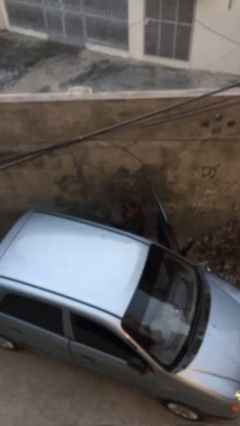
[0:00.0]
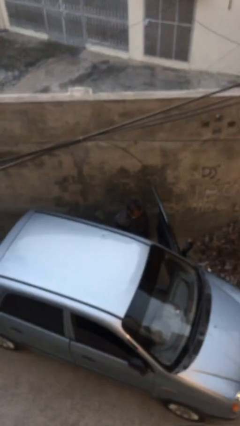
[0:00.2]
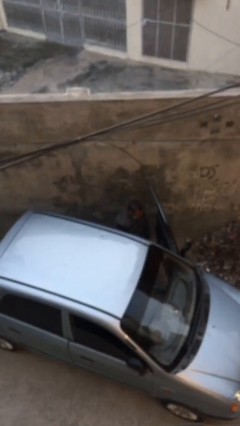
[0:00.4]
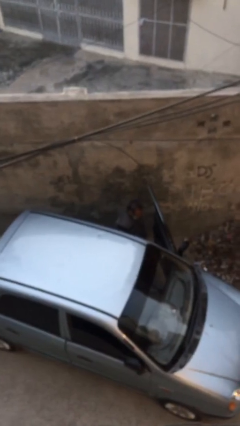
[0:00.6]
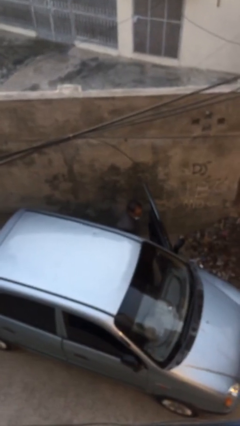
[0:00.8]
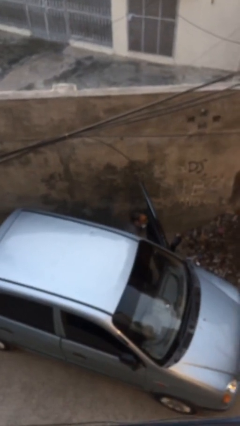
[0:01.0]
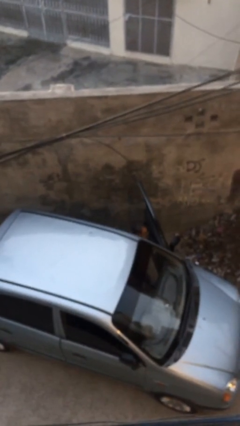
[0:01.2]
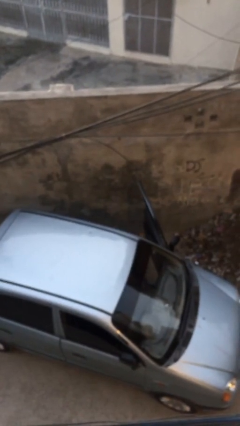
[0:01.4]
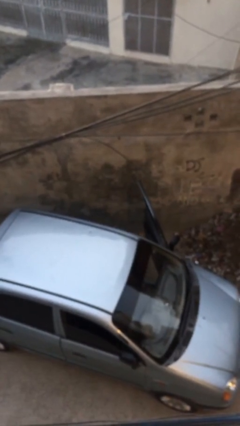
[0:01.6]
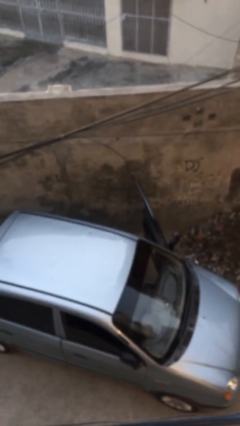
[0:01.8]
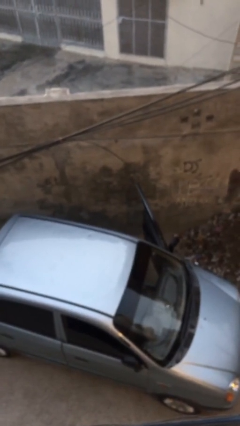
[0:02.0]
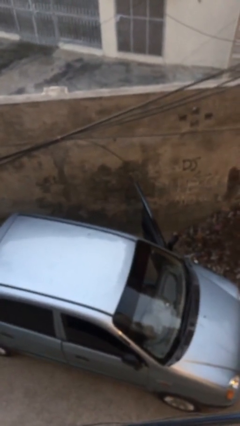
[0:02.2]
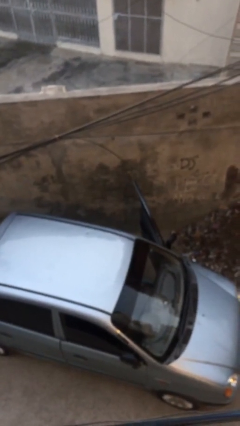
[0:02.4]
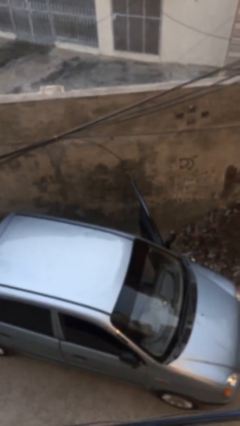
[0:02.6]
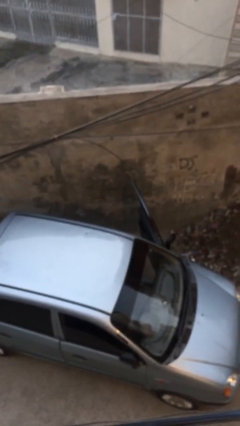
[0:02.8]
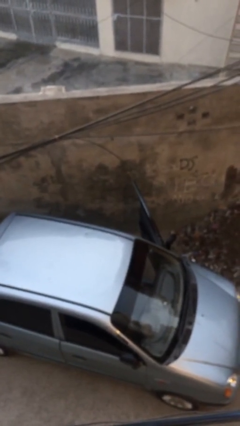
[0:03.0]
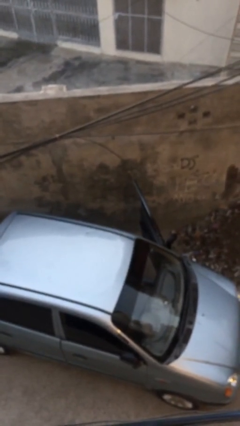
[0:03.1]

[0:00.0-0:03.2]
person enters car

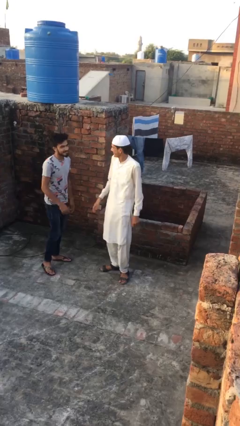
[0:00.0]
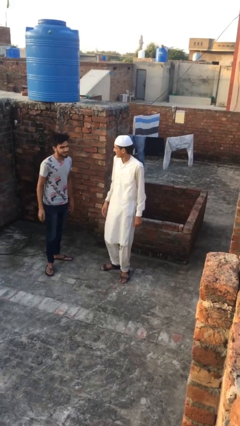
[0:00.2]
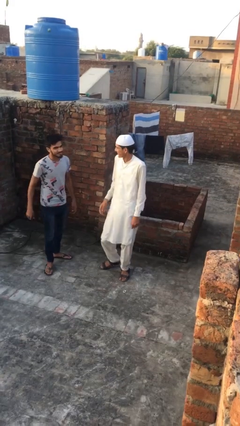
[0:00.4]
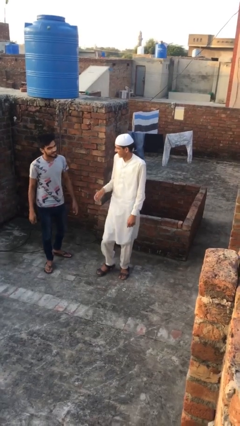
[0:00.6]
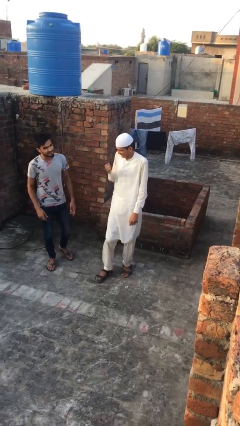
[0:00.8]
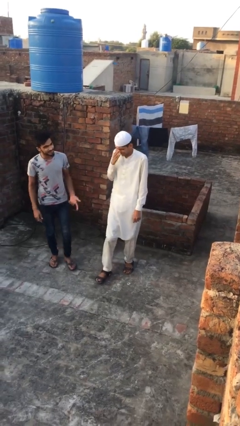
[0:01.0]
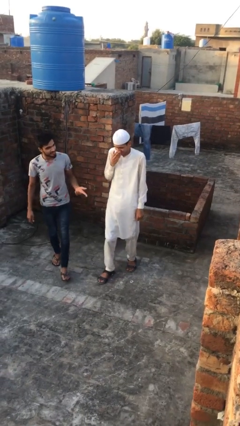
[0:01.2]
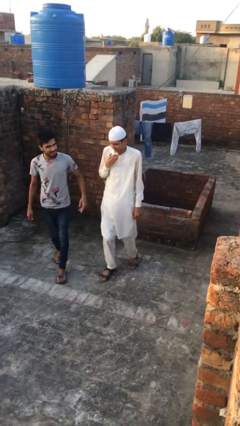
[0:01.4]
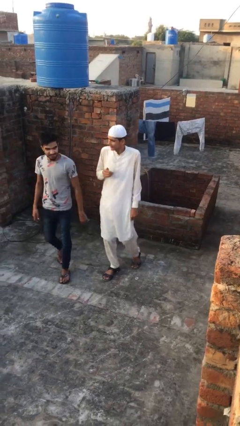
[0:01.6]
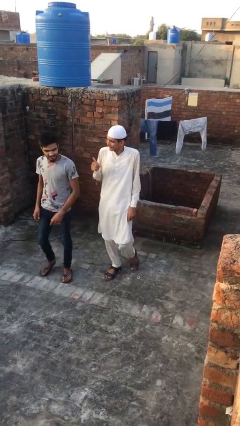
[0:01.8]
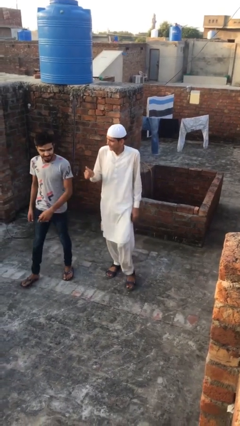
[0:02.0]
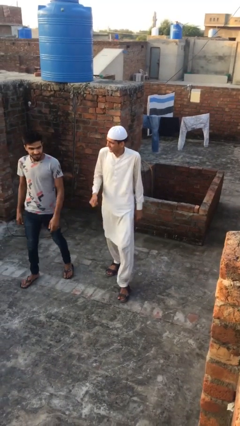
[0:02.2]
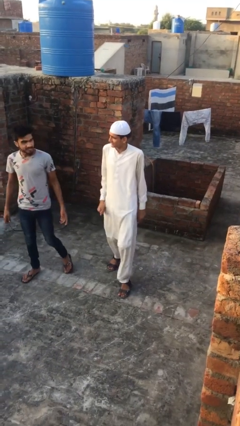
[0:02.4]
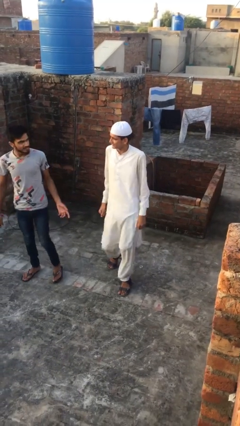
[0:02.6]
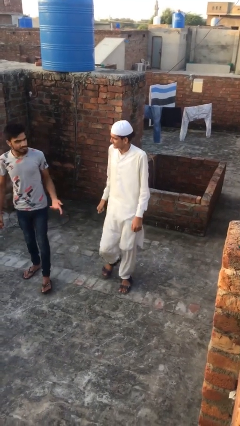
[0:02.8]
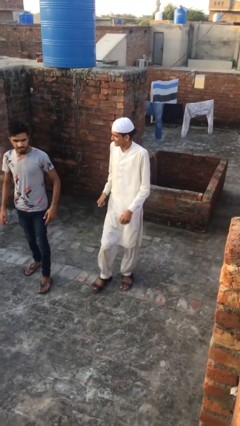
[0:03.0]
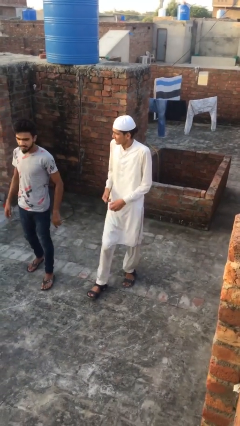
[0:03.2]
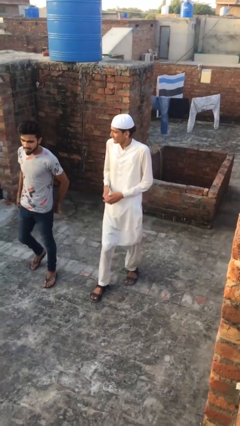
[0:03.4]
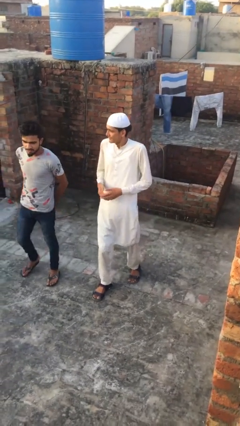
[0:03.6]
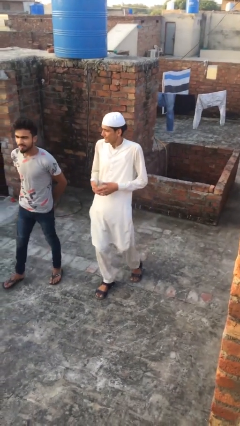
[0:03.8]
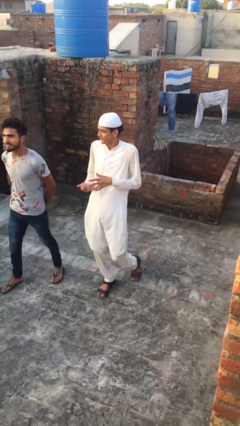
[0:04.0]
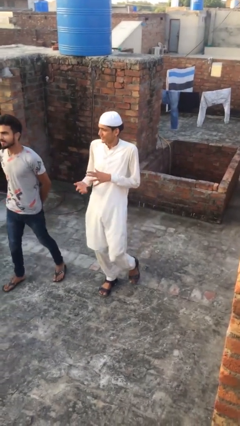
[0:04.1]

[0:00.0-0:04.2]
person talks to person

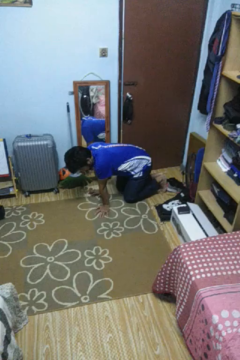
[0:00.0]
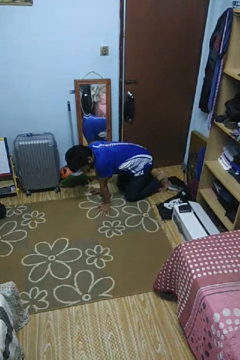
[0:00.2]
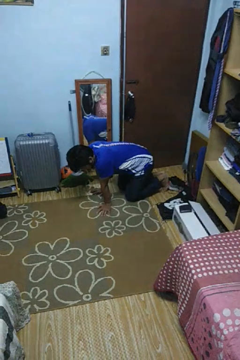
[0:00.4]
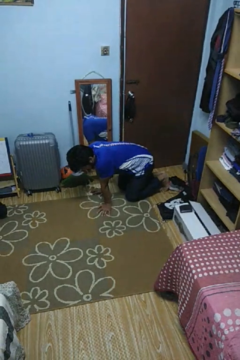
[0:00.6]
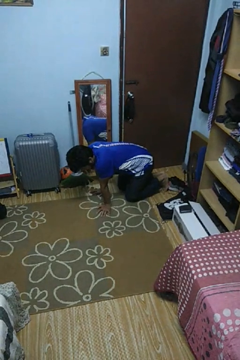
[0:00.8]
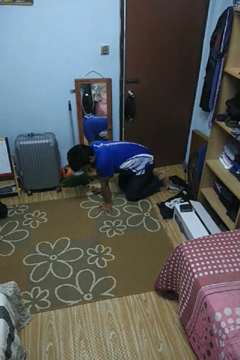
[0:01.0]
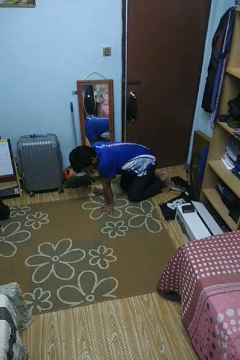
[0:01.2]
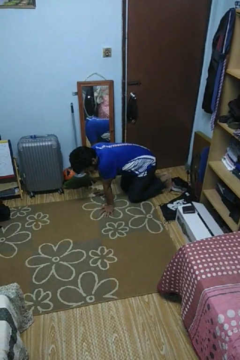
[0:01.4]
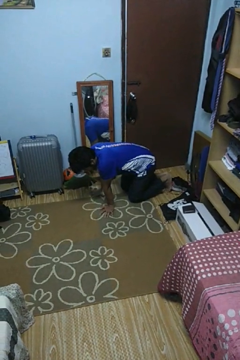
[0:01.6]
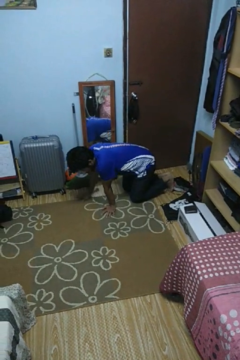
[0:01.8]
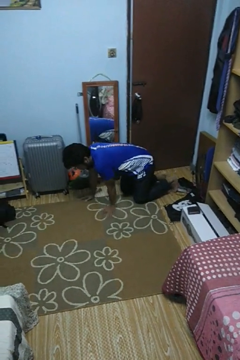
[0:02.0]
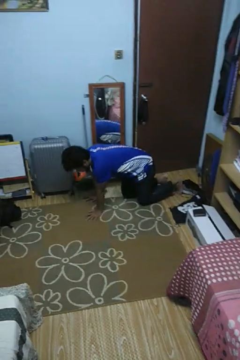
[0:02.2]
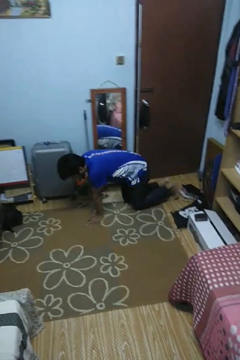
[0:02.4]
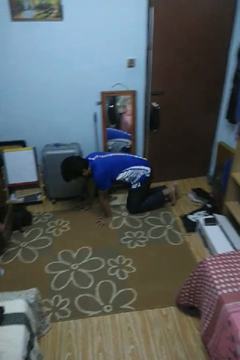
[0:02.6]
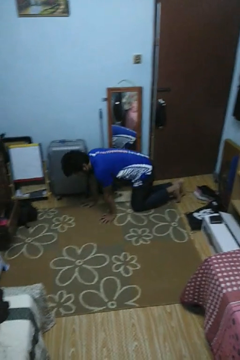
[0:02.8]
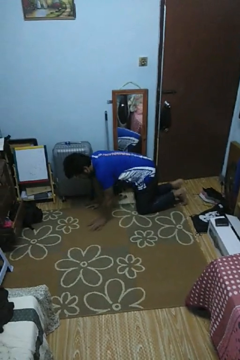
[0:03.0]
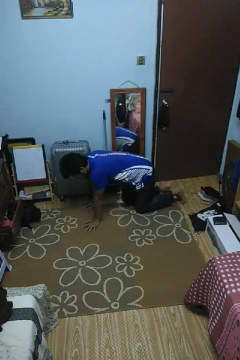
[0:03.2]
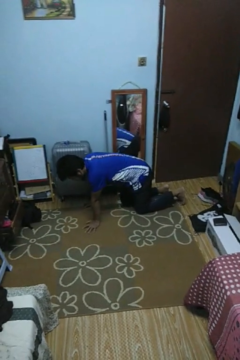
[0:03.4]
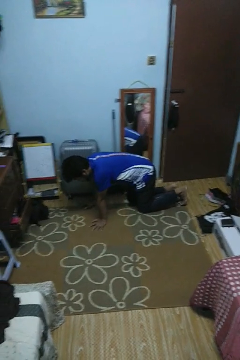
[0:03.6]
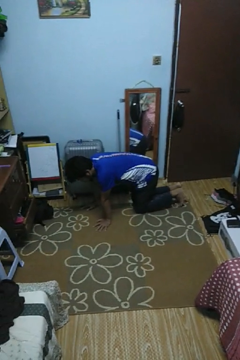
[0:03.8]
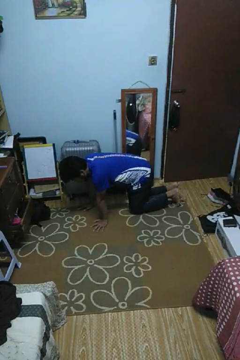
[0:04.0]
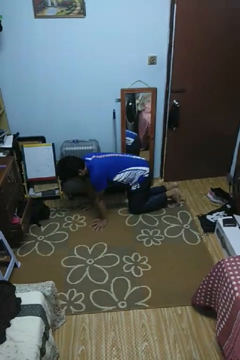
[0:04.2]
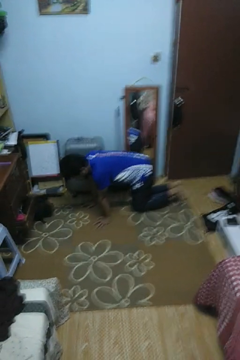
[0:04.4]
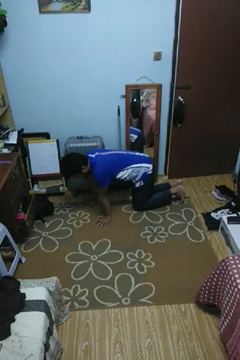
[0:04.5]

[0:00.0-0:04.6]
person crawls

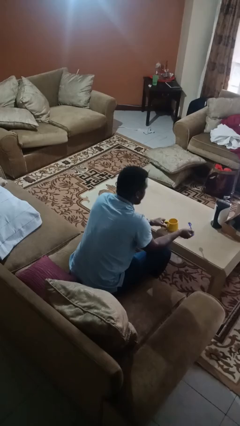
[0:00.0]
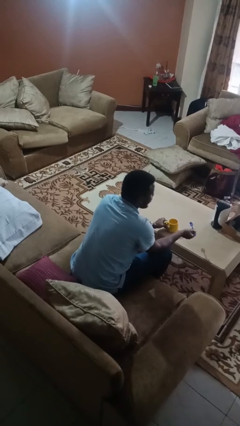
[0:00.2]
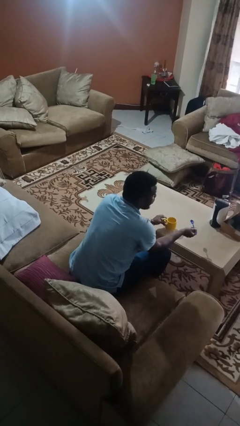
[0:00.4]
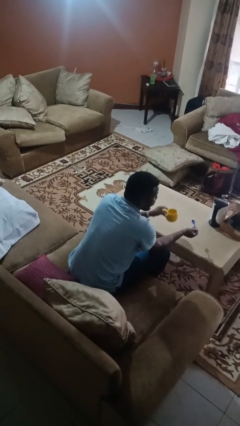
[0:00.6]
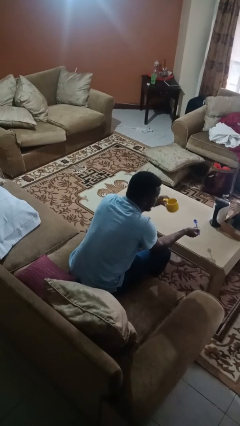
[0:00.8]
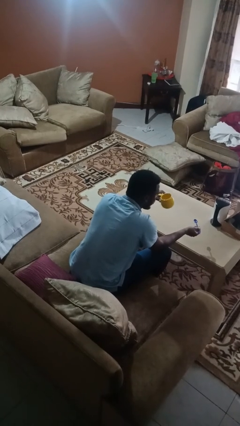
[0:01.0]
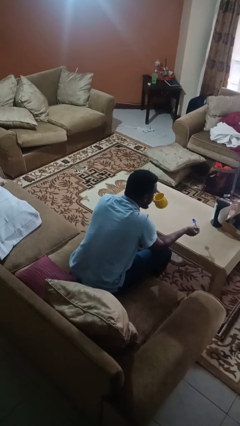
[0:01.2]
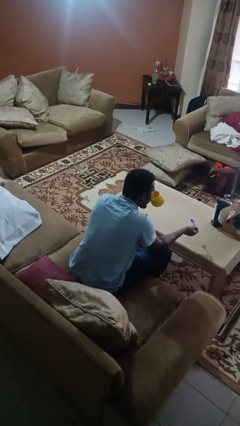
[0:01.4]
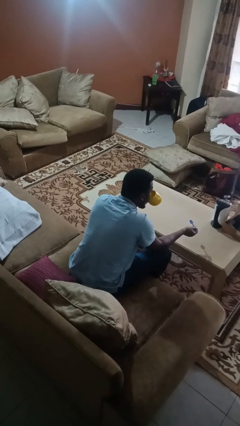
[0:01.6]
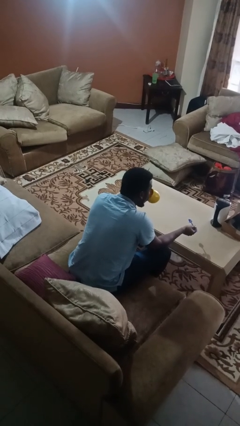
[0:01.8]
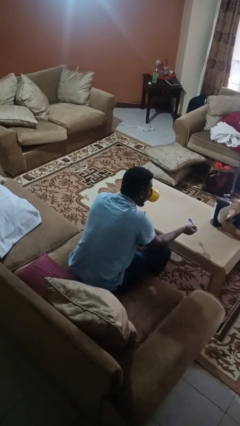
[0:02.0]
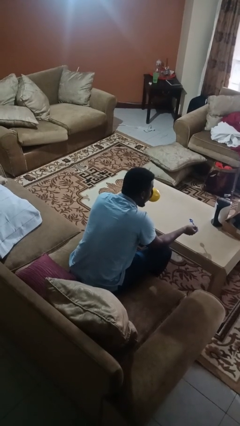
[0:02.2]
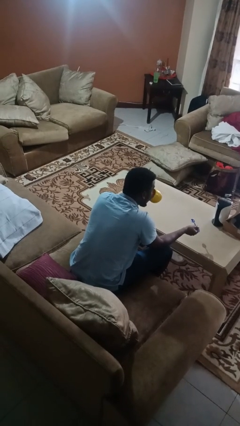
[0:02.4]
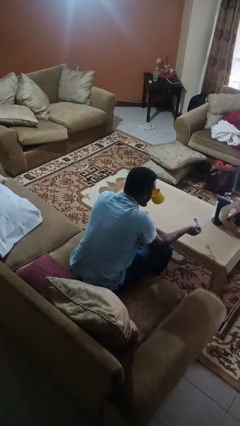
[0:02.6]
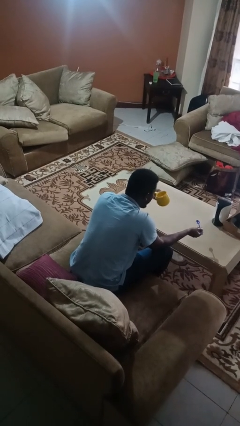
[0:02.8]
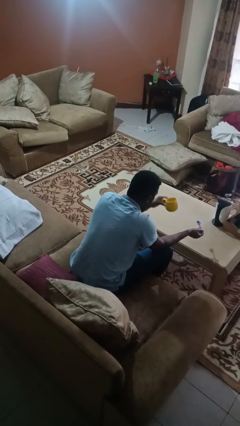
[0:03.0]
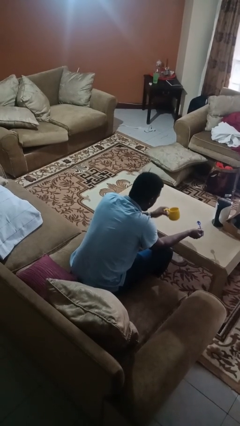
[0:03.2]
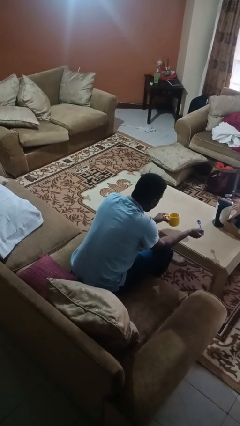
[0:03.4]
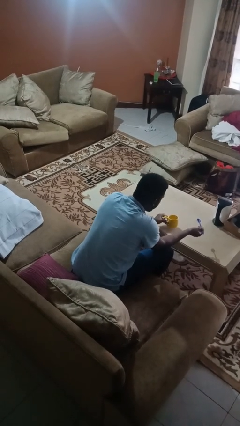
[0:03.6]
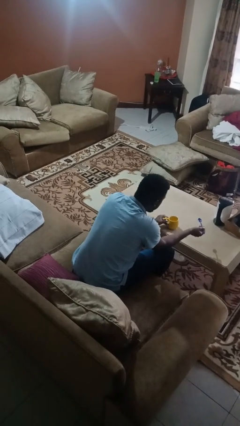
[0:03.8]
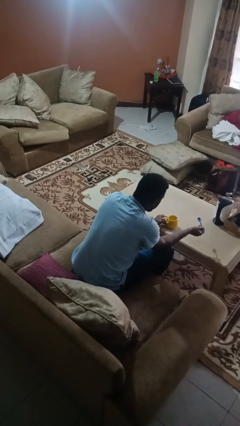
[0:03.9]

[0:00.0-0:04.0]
person drinks from mug

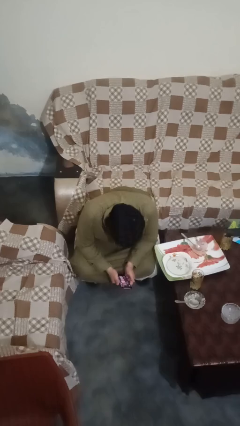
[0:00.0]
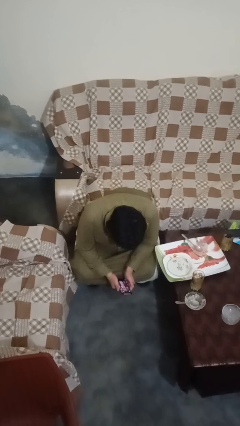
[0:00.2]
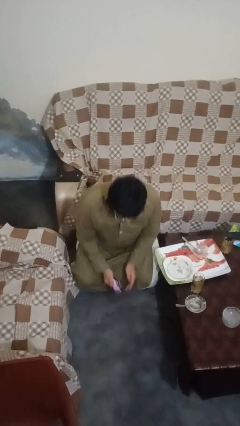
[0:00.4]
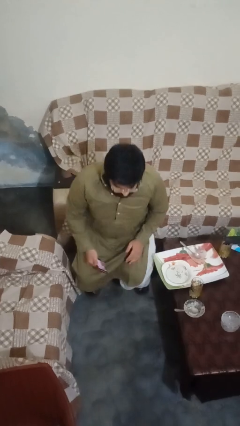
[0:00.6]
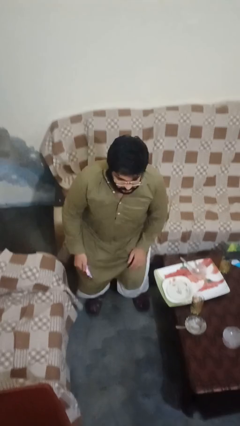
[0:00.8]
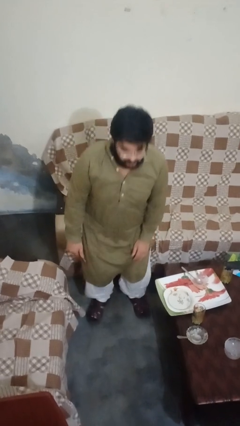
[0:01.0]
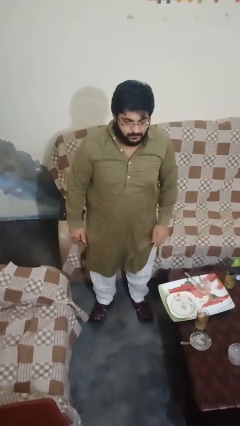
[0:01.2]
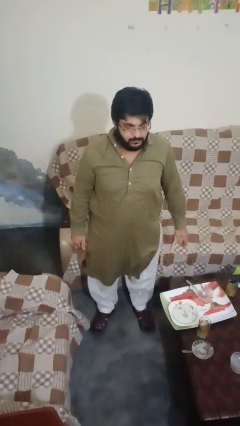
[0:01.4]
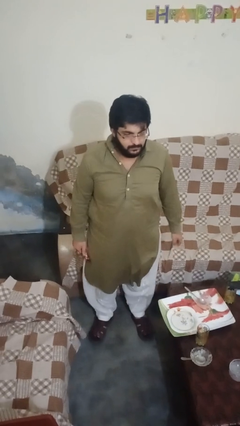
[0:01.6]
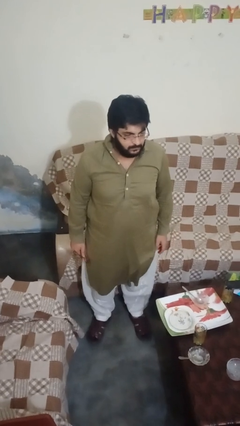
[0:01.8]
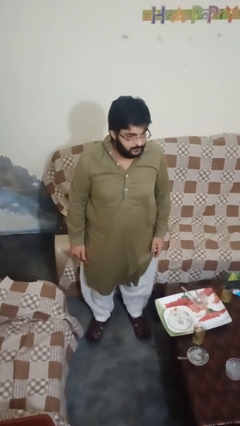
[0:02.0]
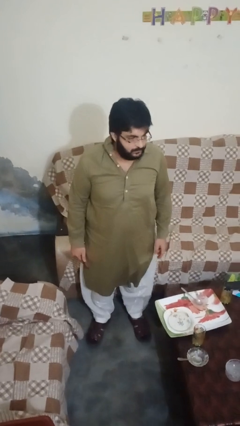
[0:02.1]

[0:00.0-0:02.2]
person stands up

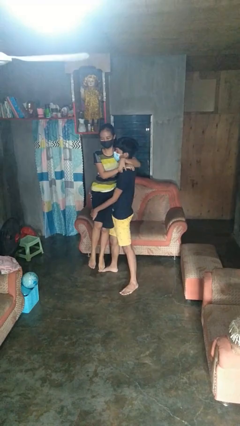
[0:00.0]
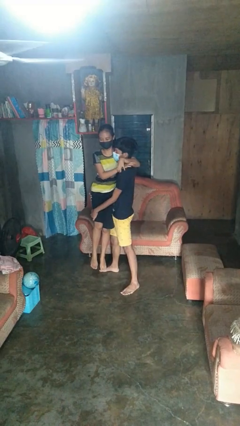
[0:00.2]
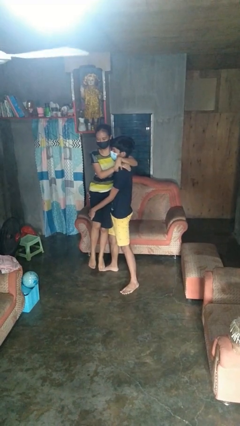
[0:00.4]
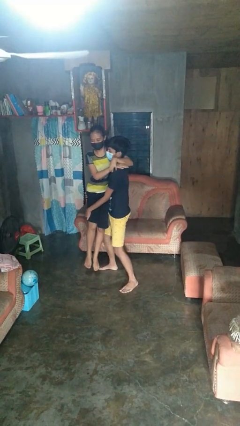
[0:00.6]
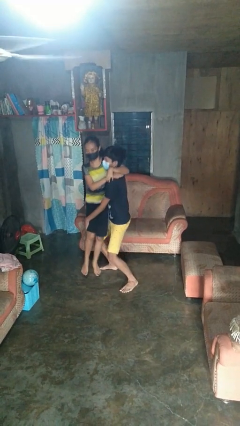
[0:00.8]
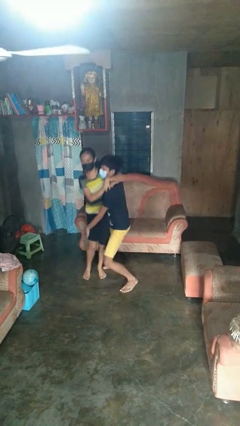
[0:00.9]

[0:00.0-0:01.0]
person puts down person
